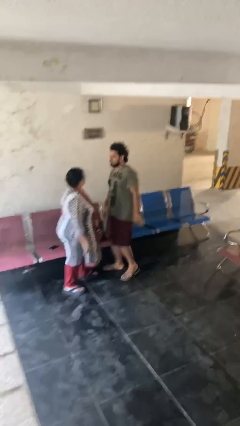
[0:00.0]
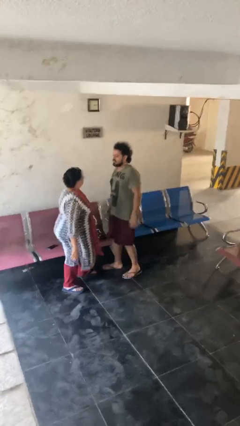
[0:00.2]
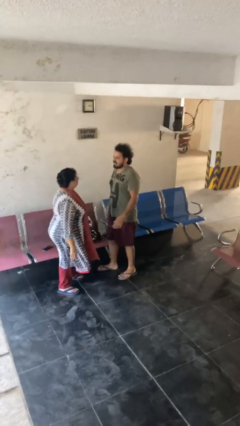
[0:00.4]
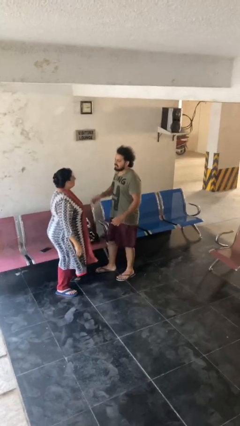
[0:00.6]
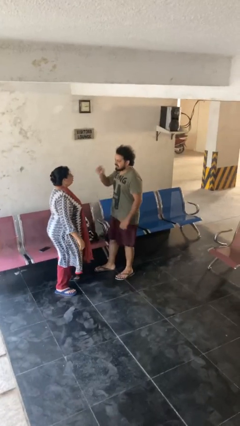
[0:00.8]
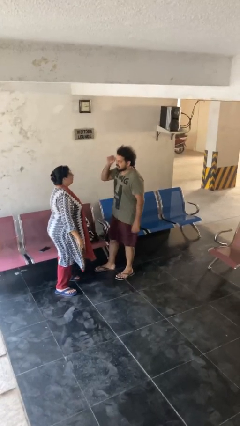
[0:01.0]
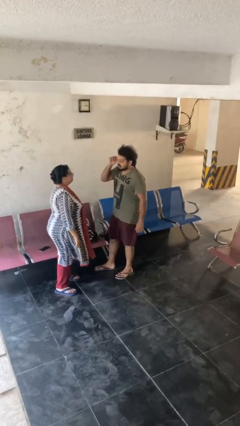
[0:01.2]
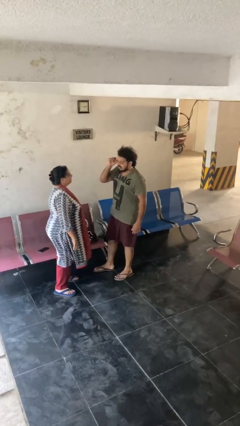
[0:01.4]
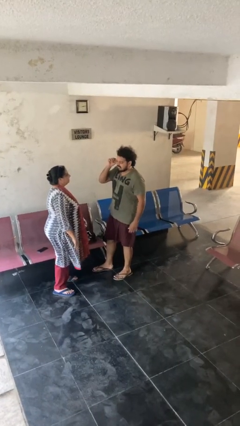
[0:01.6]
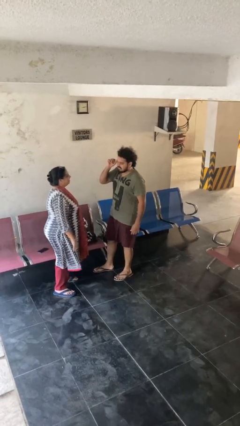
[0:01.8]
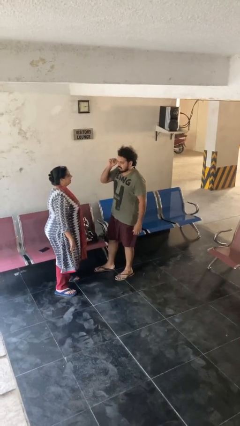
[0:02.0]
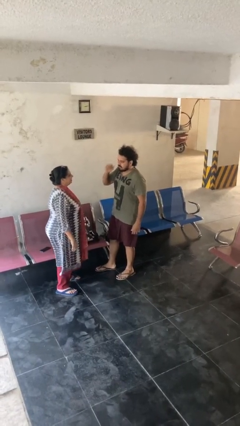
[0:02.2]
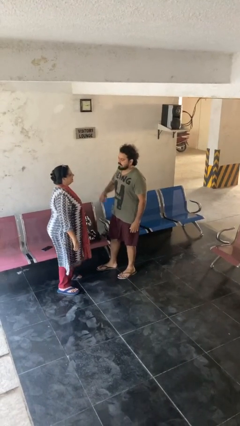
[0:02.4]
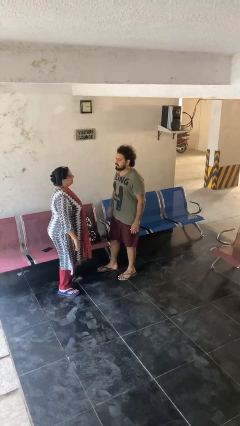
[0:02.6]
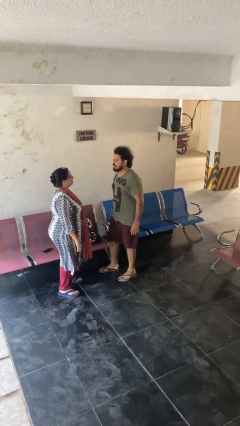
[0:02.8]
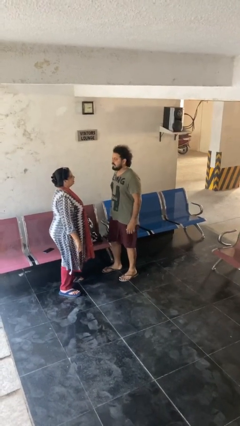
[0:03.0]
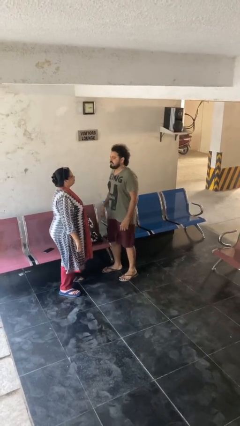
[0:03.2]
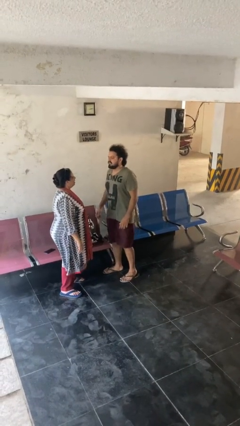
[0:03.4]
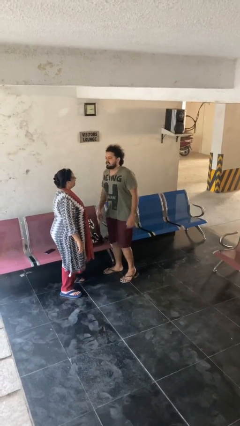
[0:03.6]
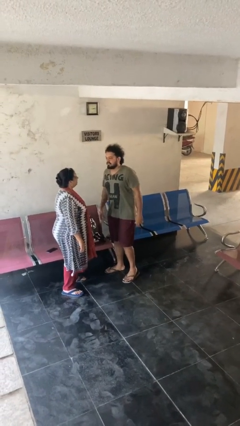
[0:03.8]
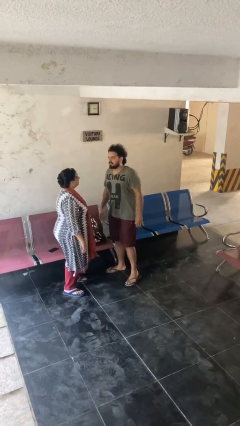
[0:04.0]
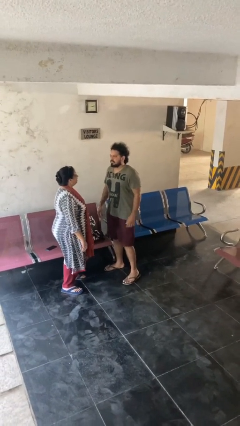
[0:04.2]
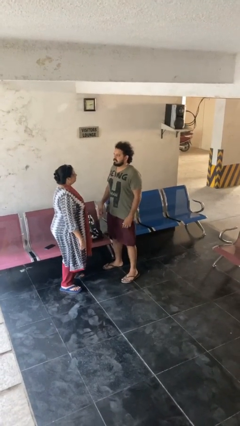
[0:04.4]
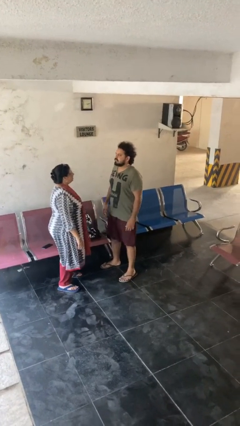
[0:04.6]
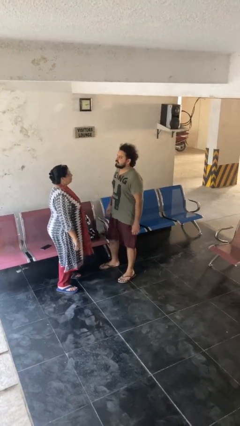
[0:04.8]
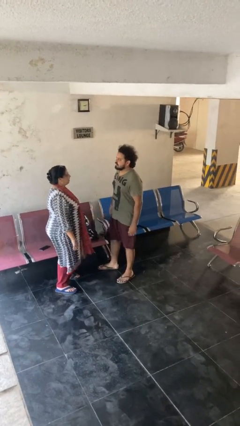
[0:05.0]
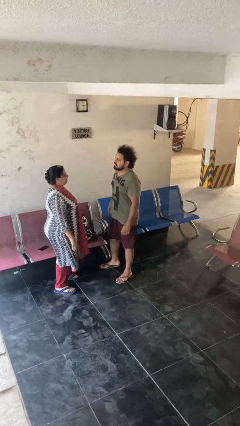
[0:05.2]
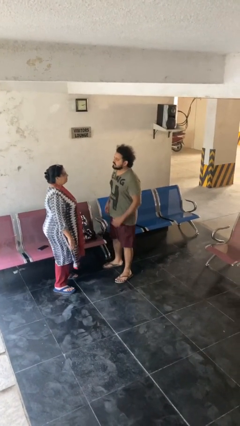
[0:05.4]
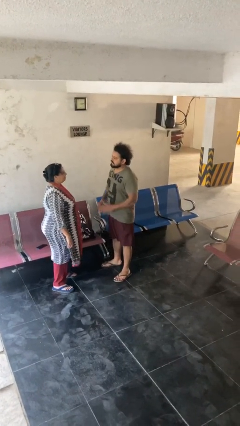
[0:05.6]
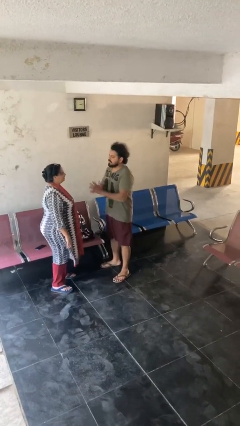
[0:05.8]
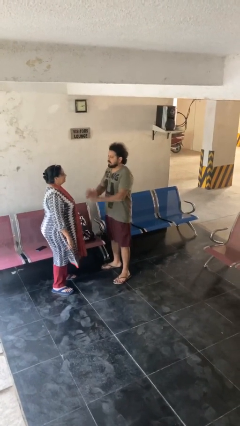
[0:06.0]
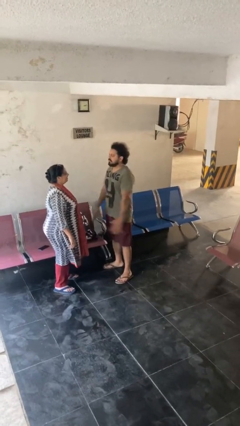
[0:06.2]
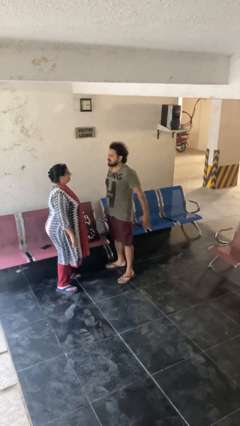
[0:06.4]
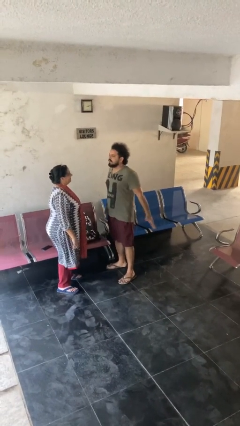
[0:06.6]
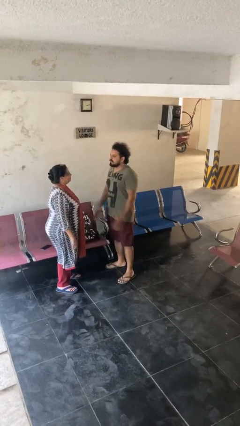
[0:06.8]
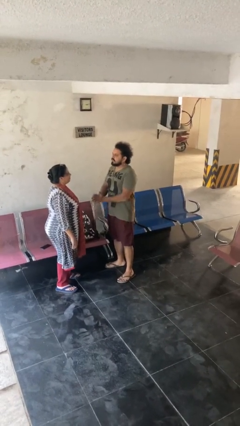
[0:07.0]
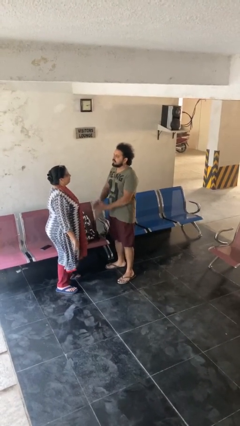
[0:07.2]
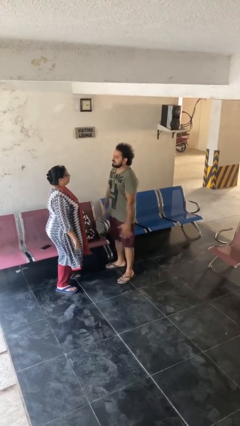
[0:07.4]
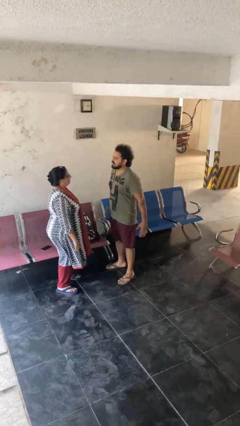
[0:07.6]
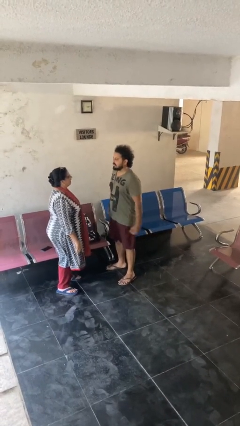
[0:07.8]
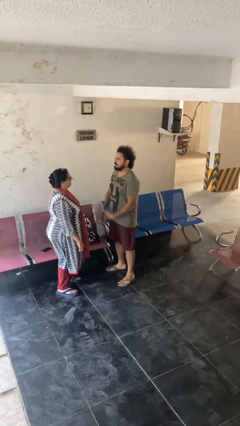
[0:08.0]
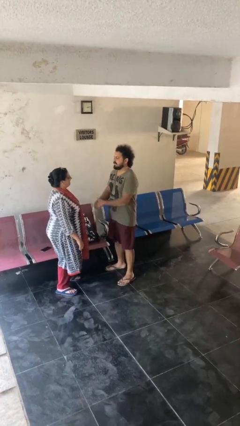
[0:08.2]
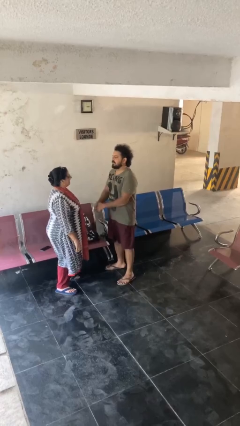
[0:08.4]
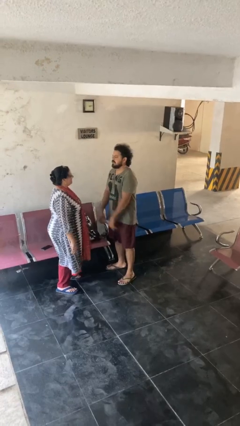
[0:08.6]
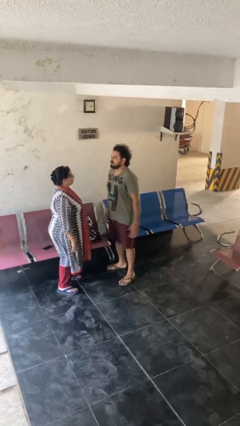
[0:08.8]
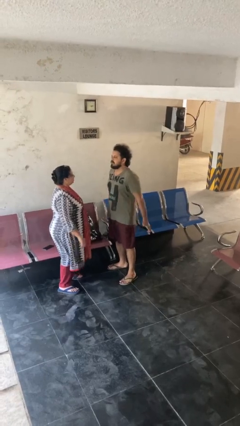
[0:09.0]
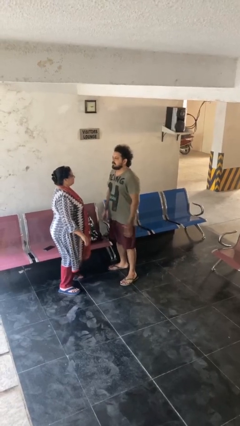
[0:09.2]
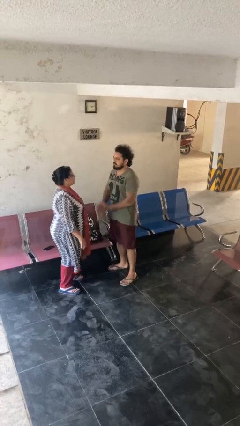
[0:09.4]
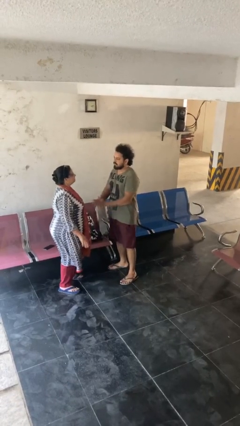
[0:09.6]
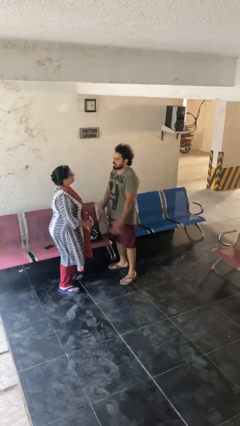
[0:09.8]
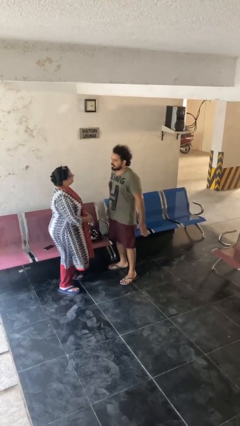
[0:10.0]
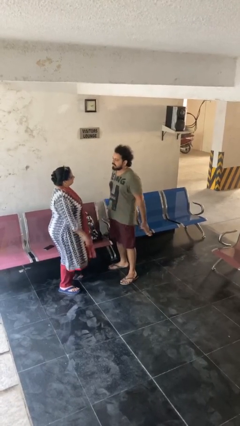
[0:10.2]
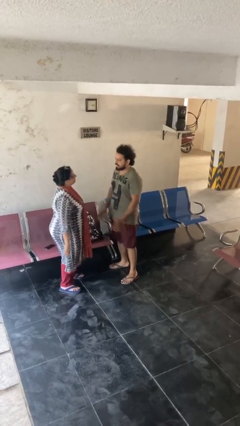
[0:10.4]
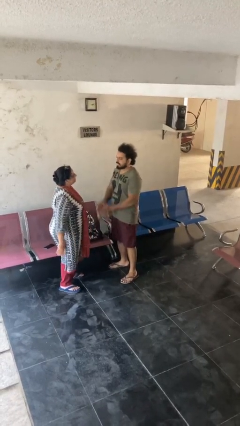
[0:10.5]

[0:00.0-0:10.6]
person talks to person

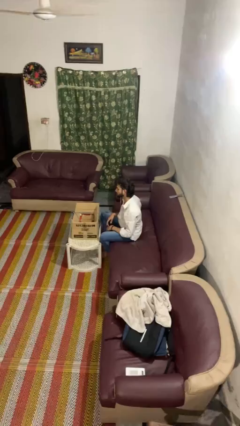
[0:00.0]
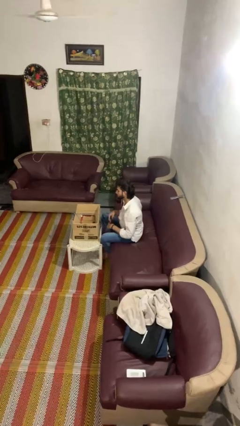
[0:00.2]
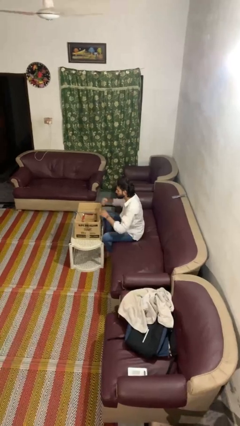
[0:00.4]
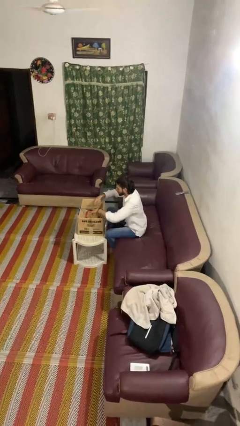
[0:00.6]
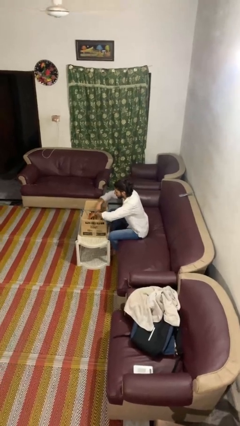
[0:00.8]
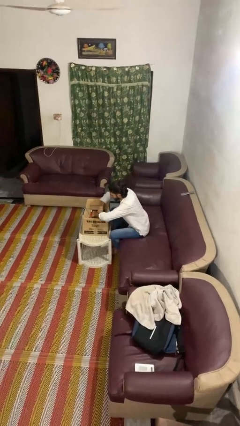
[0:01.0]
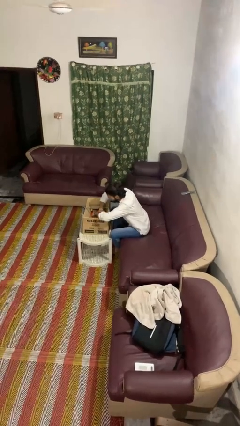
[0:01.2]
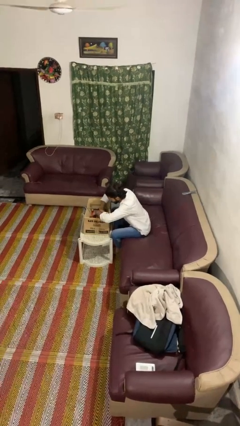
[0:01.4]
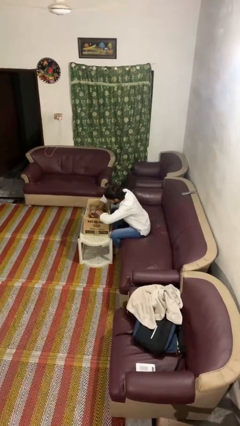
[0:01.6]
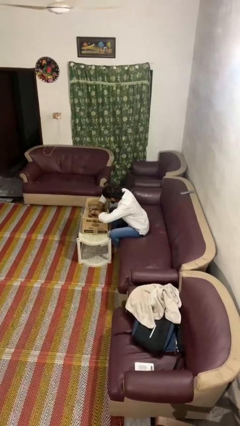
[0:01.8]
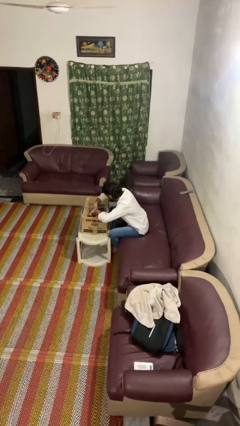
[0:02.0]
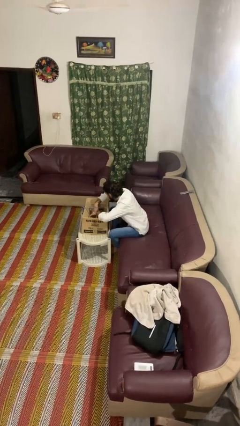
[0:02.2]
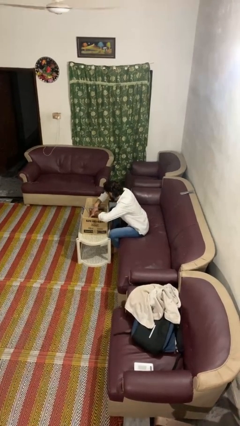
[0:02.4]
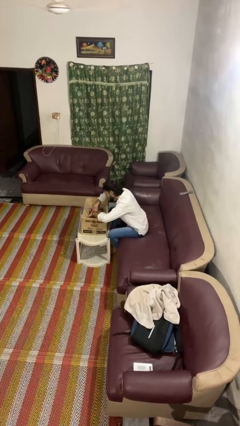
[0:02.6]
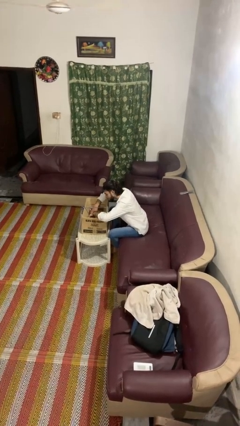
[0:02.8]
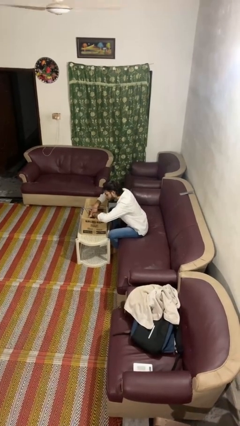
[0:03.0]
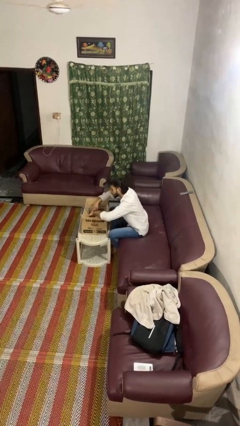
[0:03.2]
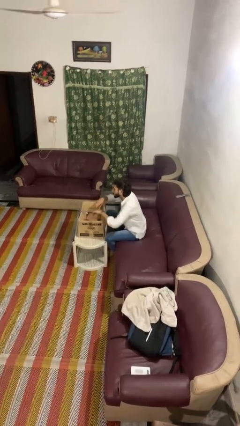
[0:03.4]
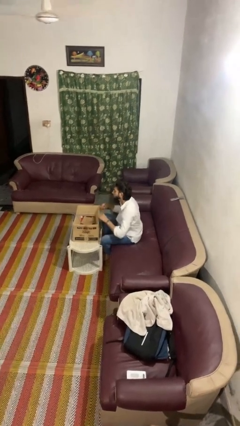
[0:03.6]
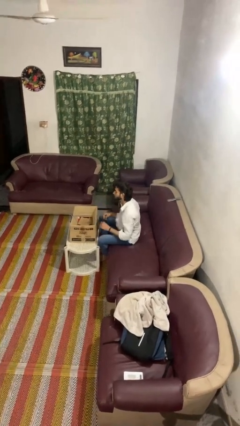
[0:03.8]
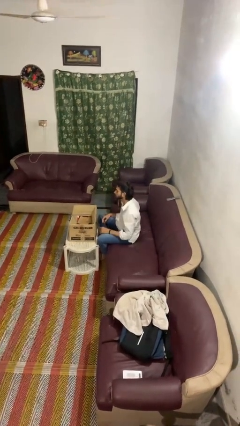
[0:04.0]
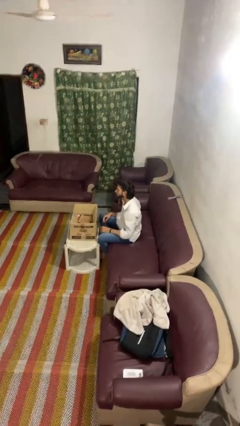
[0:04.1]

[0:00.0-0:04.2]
person searches in box

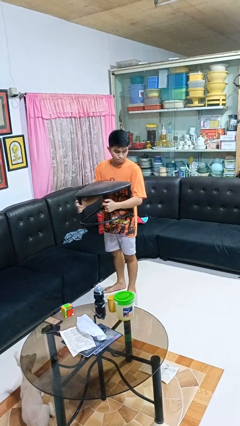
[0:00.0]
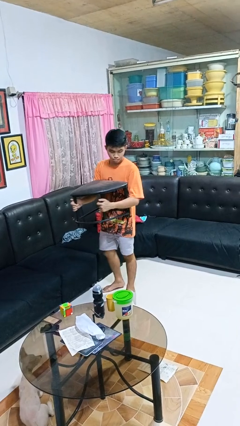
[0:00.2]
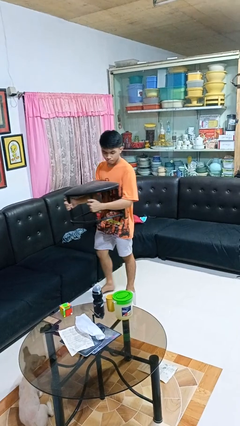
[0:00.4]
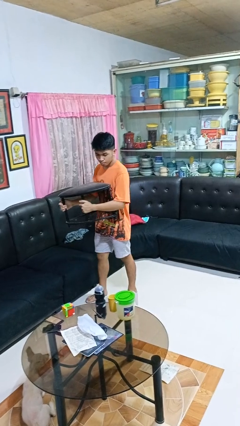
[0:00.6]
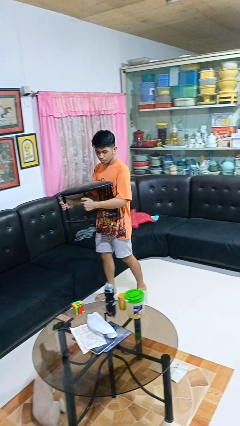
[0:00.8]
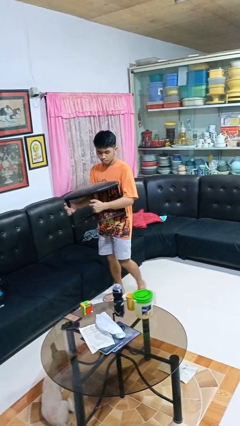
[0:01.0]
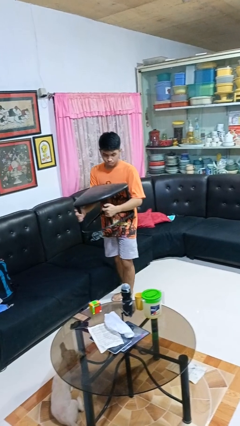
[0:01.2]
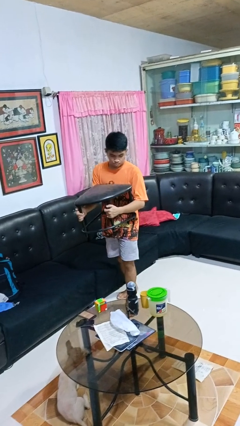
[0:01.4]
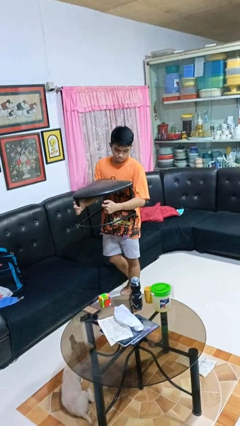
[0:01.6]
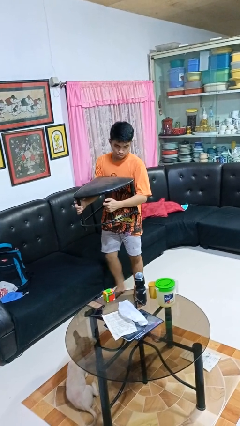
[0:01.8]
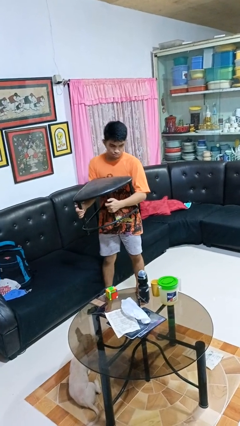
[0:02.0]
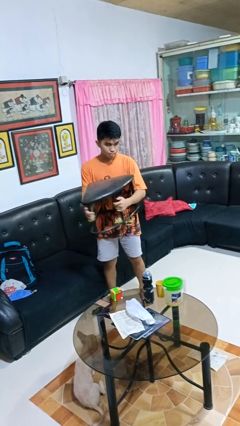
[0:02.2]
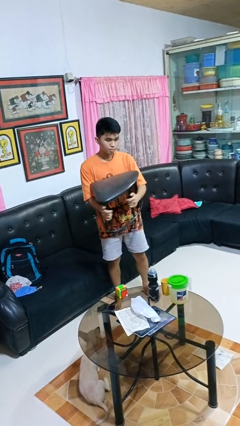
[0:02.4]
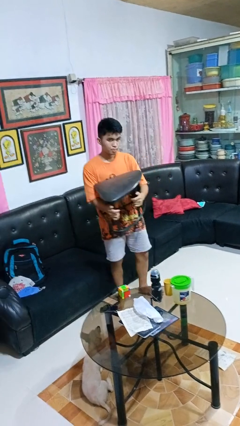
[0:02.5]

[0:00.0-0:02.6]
person carries furniture

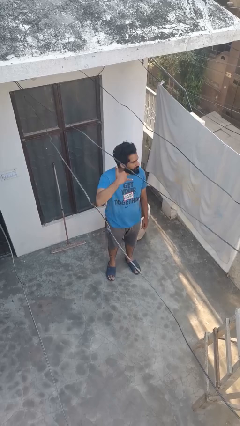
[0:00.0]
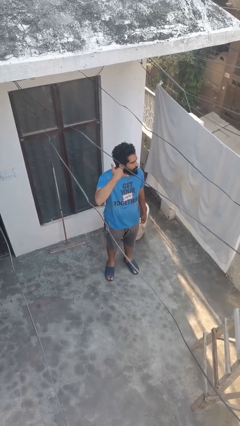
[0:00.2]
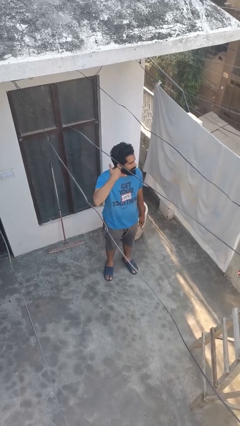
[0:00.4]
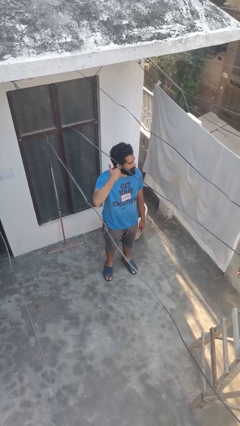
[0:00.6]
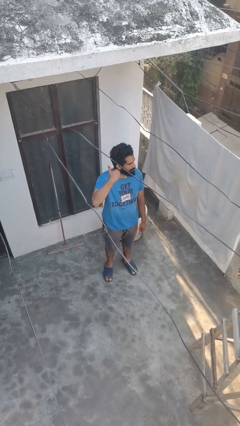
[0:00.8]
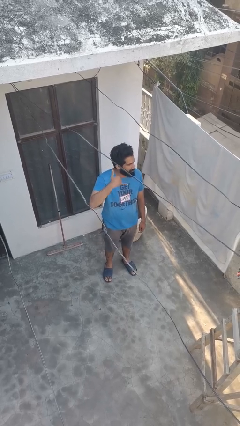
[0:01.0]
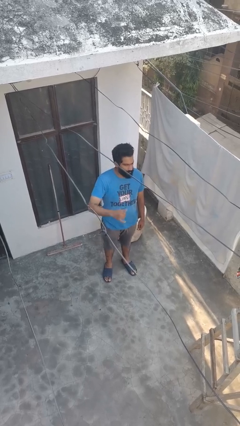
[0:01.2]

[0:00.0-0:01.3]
person gestures call me
